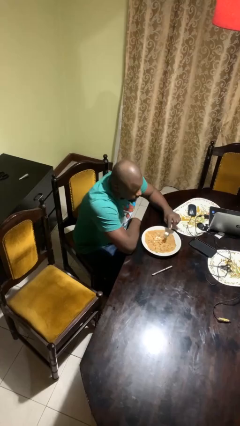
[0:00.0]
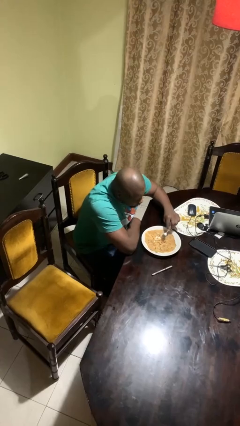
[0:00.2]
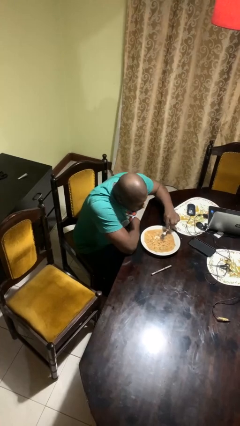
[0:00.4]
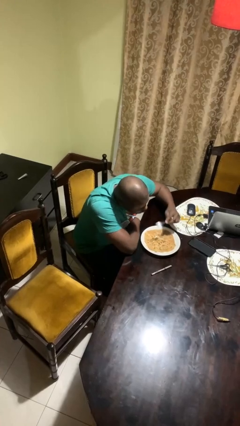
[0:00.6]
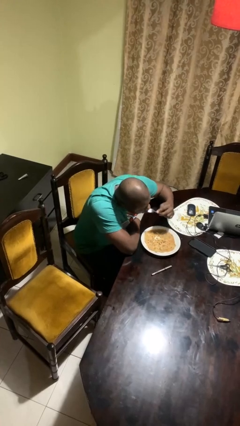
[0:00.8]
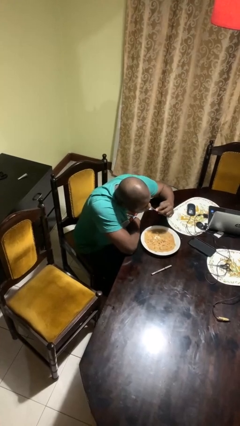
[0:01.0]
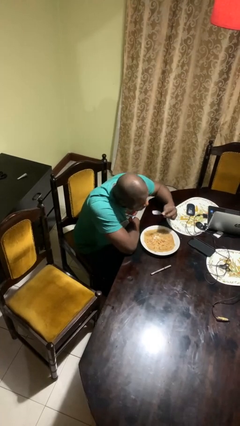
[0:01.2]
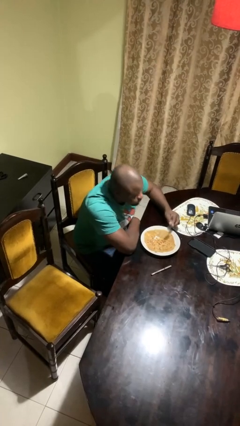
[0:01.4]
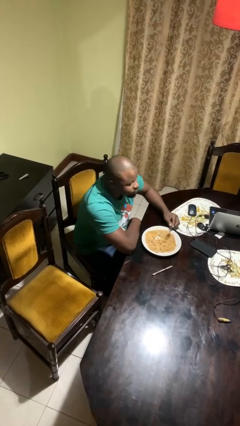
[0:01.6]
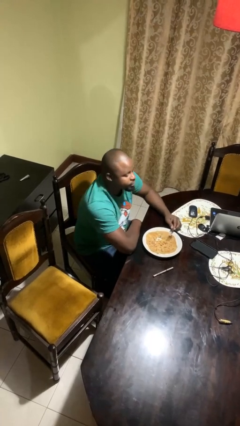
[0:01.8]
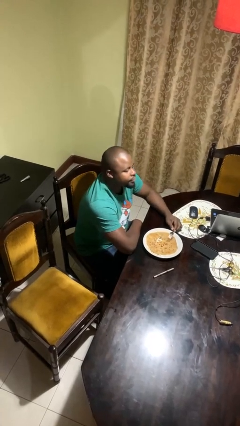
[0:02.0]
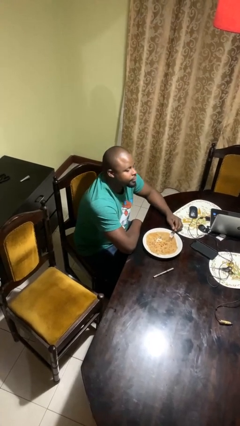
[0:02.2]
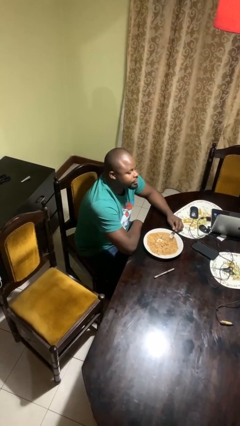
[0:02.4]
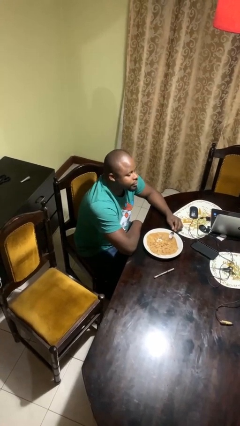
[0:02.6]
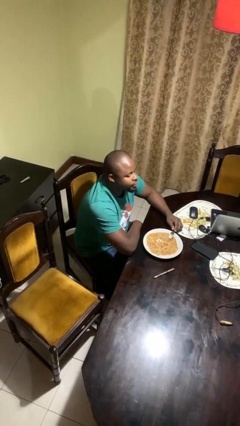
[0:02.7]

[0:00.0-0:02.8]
person eats with utensil

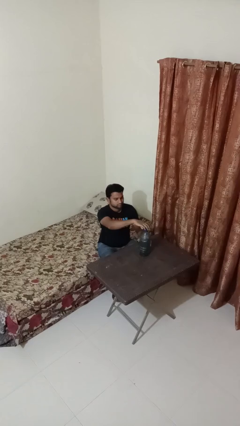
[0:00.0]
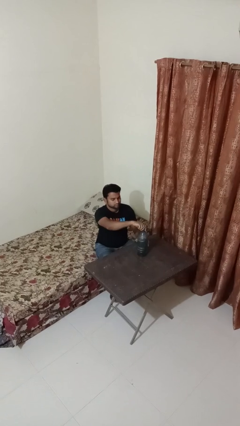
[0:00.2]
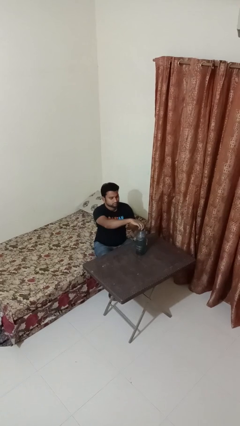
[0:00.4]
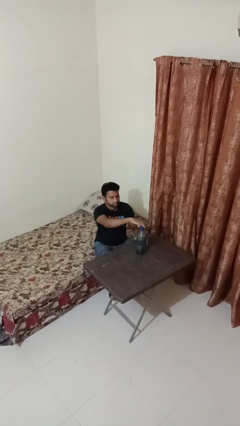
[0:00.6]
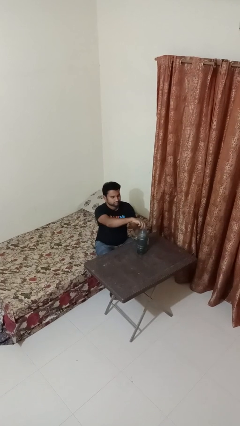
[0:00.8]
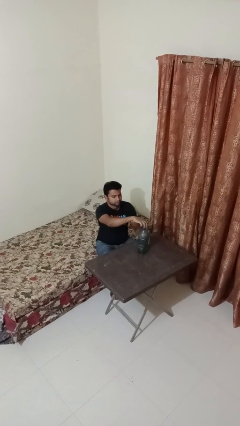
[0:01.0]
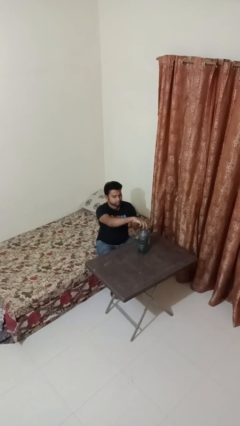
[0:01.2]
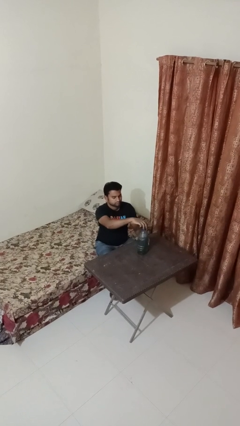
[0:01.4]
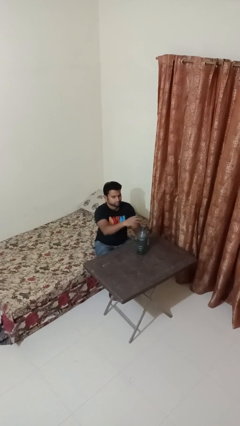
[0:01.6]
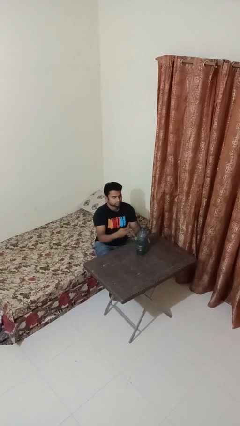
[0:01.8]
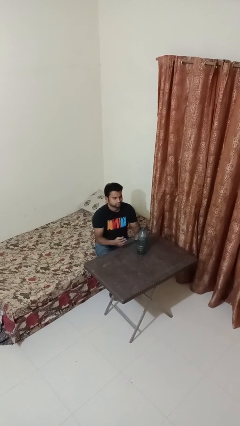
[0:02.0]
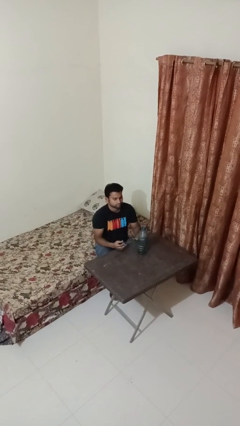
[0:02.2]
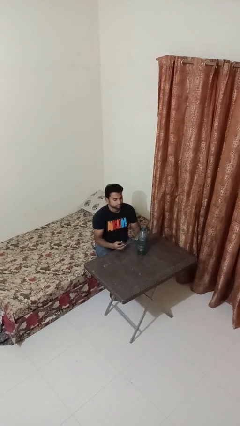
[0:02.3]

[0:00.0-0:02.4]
person unscrews lid from bottle

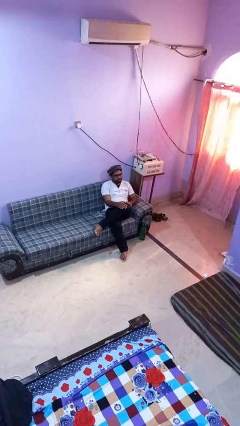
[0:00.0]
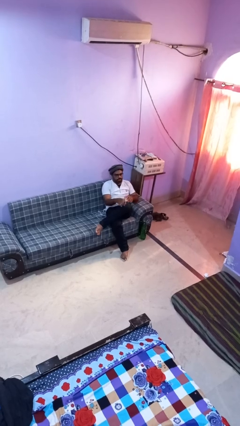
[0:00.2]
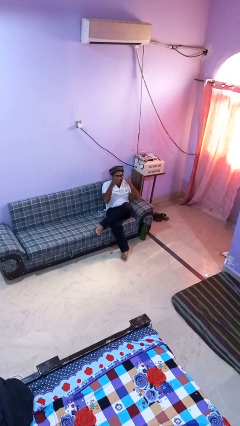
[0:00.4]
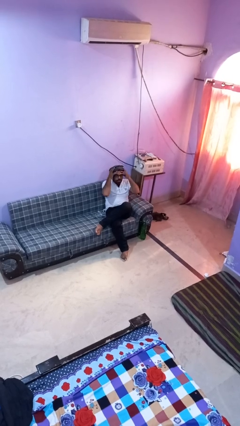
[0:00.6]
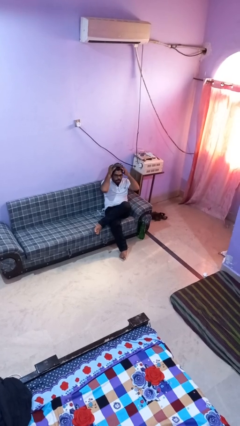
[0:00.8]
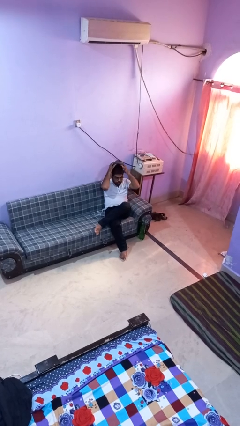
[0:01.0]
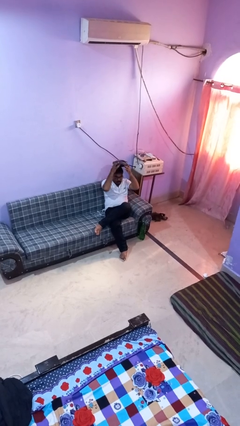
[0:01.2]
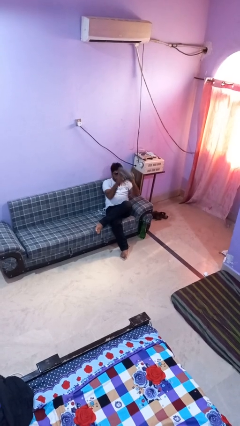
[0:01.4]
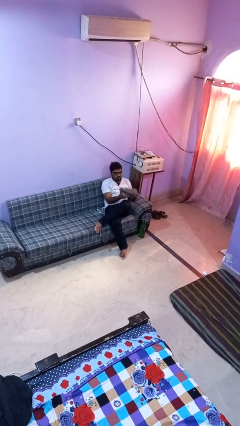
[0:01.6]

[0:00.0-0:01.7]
person takes off hat

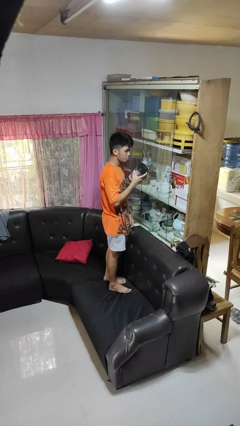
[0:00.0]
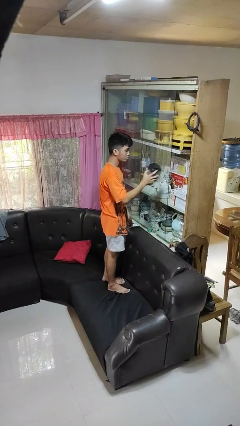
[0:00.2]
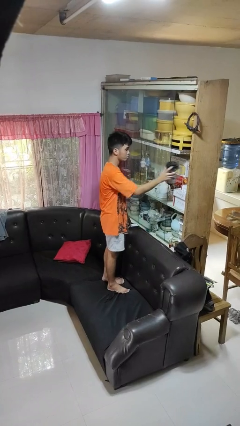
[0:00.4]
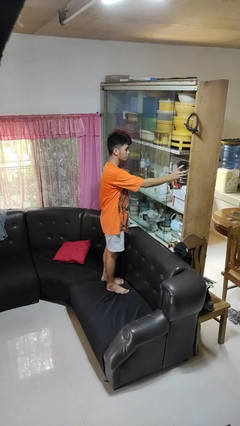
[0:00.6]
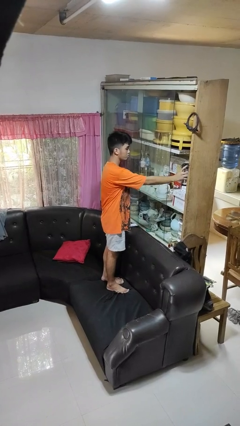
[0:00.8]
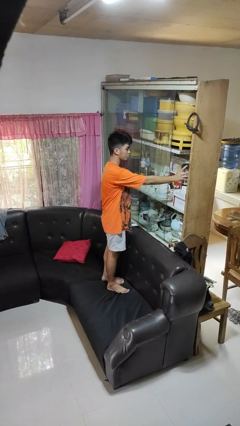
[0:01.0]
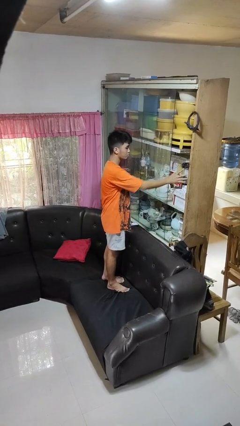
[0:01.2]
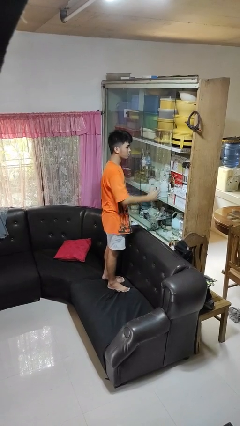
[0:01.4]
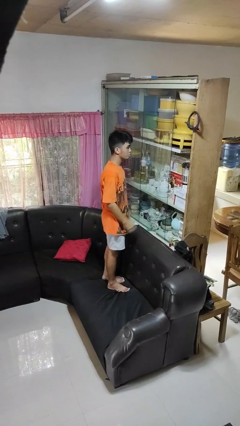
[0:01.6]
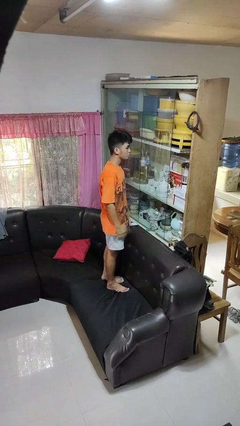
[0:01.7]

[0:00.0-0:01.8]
person puts down object into cabinet

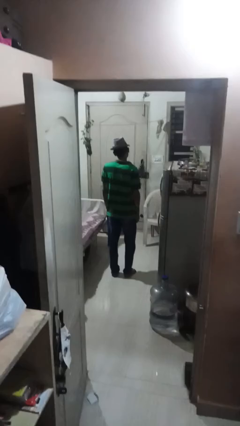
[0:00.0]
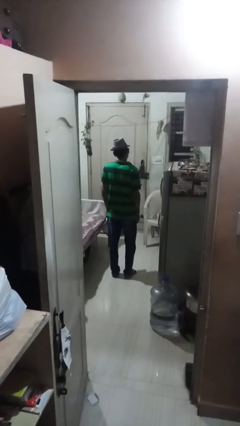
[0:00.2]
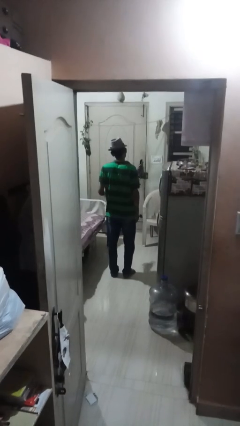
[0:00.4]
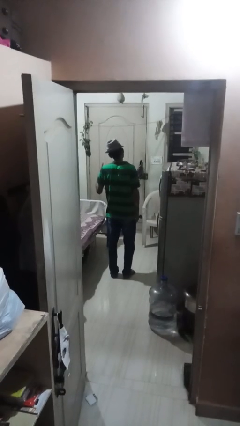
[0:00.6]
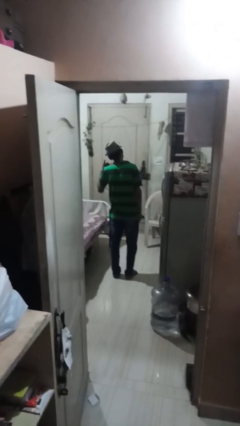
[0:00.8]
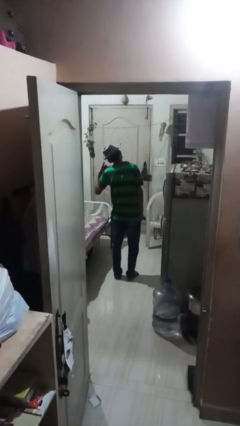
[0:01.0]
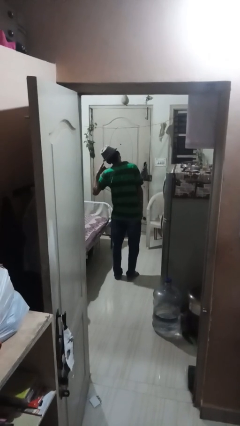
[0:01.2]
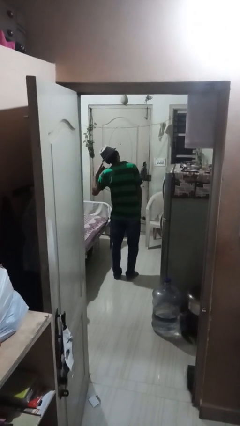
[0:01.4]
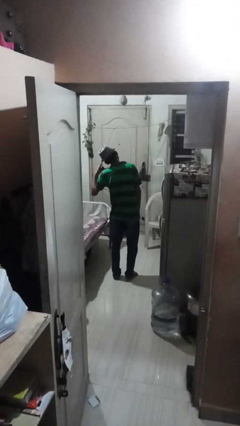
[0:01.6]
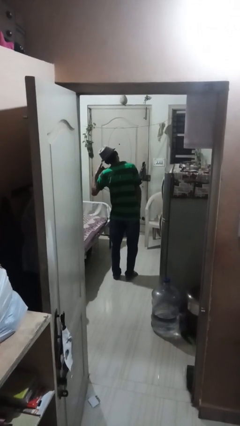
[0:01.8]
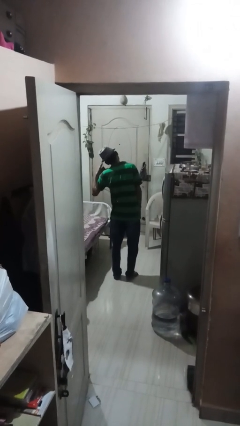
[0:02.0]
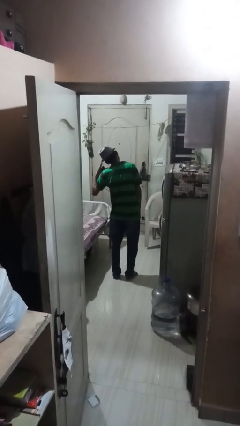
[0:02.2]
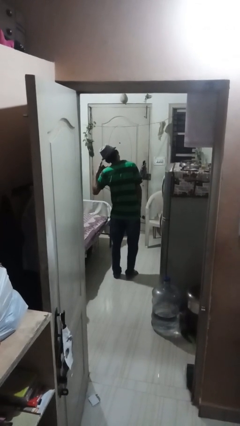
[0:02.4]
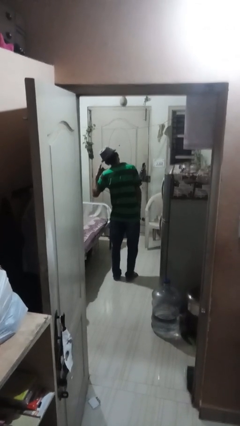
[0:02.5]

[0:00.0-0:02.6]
person gestures call me

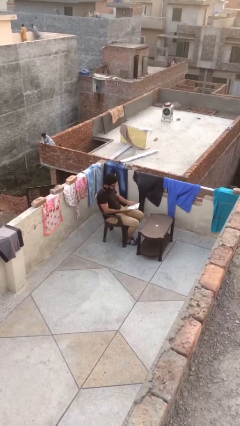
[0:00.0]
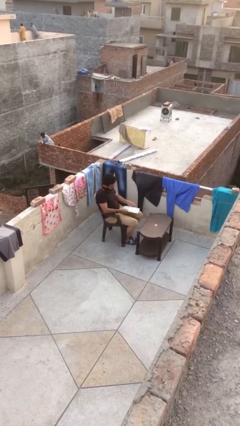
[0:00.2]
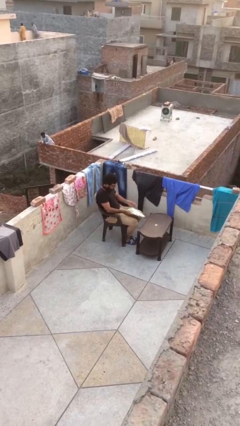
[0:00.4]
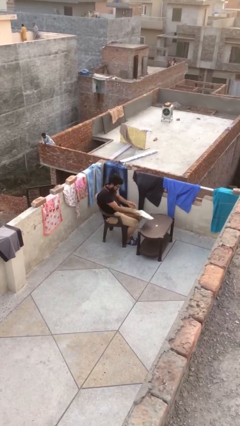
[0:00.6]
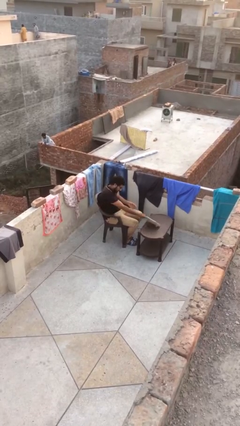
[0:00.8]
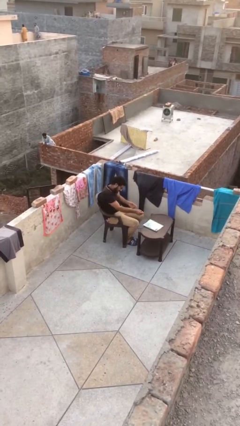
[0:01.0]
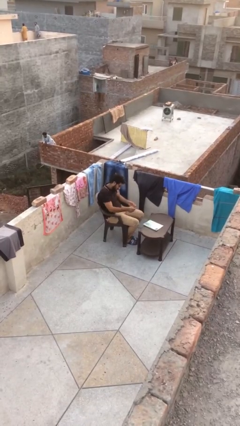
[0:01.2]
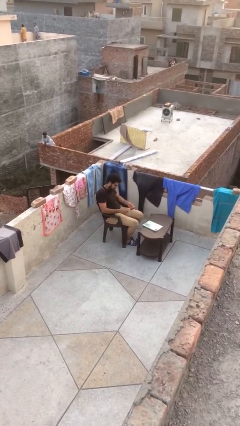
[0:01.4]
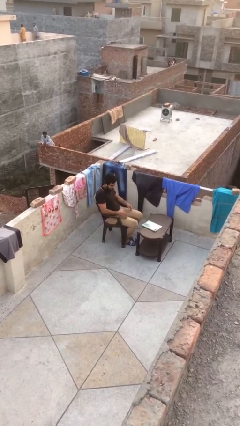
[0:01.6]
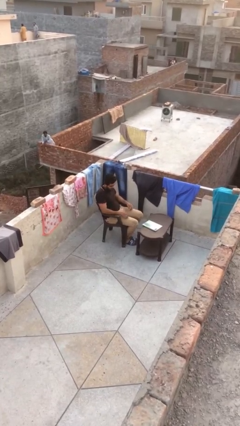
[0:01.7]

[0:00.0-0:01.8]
person puts down object on table

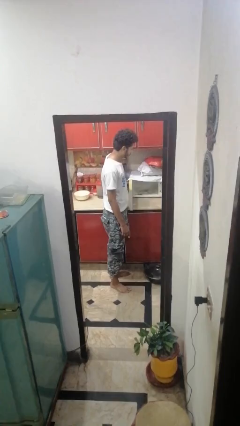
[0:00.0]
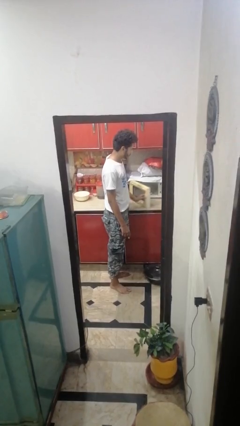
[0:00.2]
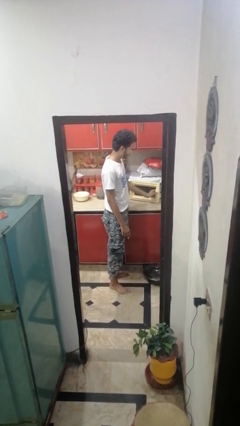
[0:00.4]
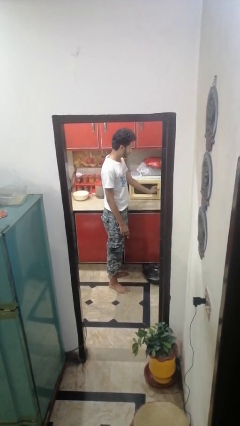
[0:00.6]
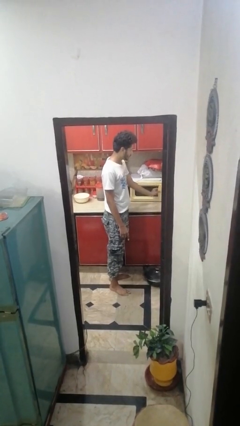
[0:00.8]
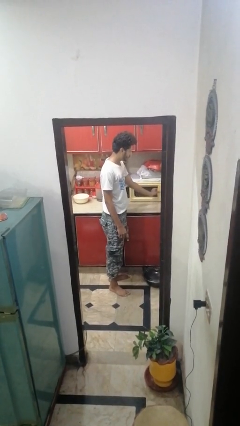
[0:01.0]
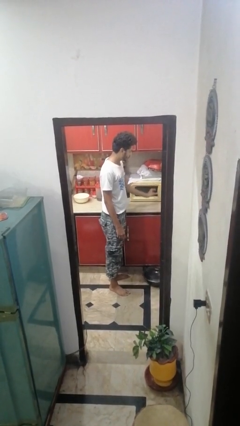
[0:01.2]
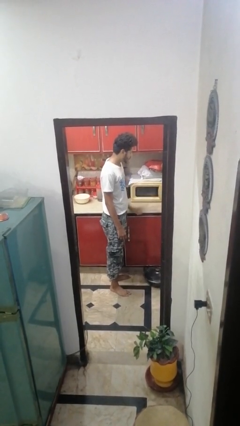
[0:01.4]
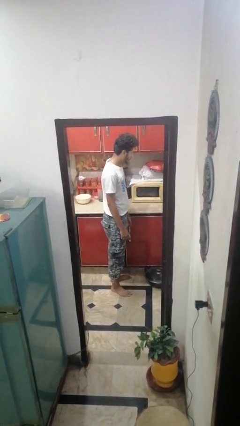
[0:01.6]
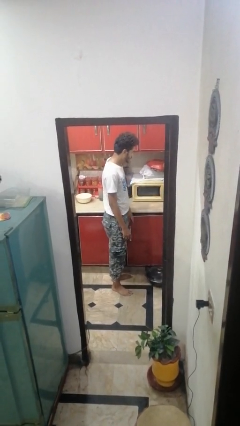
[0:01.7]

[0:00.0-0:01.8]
person closes microwave

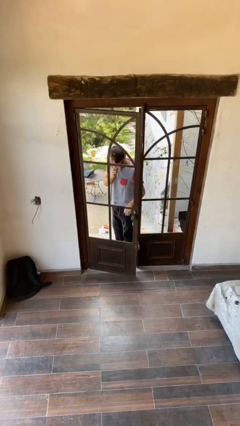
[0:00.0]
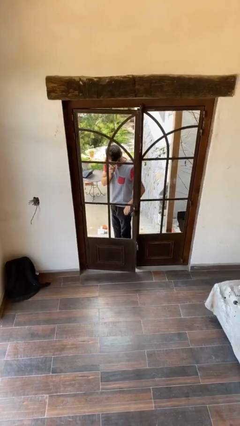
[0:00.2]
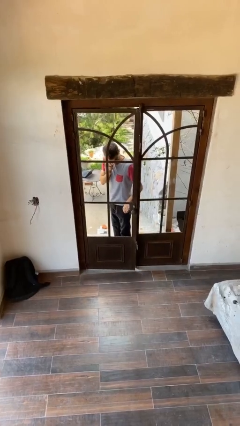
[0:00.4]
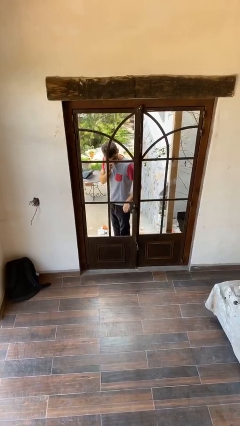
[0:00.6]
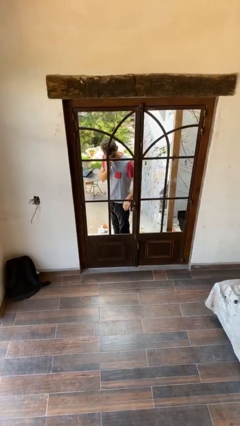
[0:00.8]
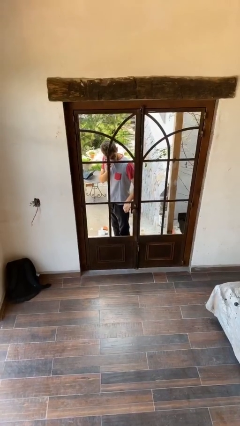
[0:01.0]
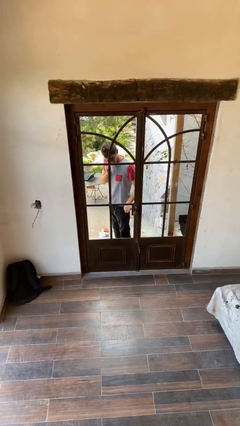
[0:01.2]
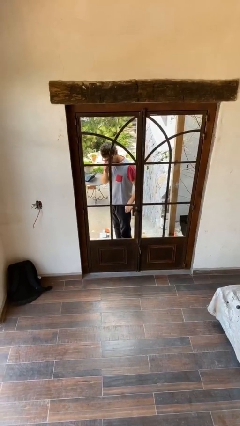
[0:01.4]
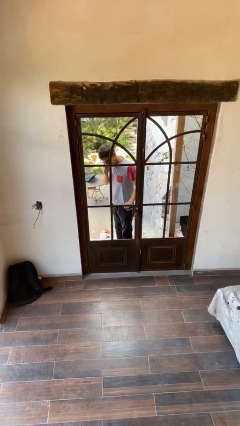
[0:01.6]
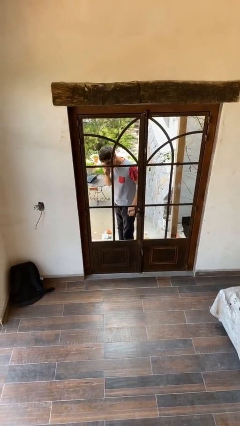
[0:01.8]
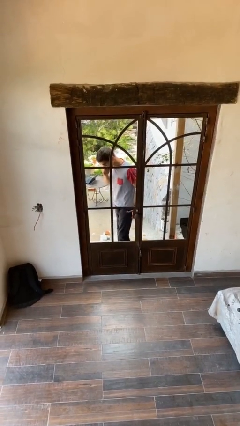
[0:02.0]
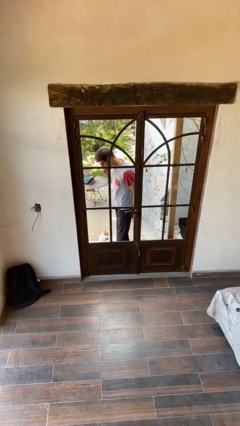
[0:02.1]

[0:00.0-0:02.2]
person closes facility door
